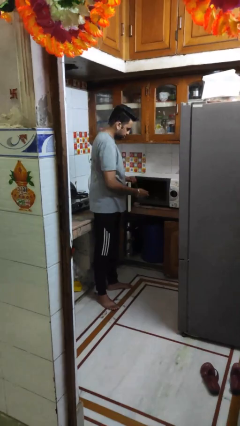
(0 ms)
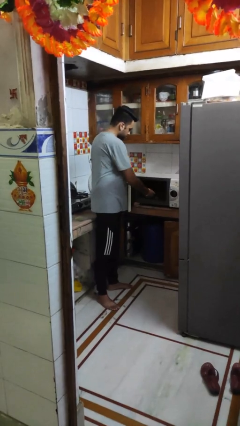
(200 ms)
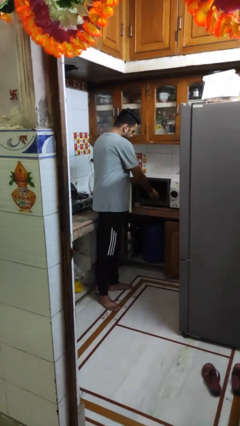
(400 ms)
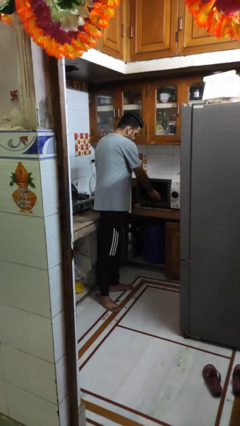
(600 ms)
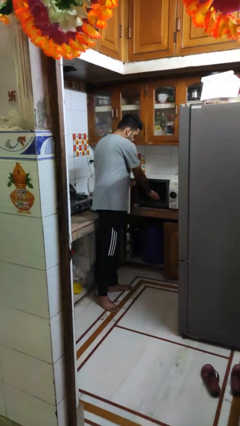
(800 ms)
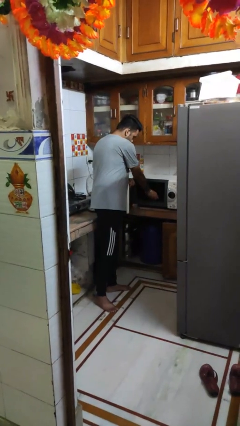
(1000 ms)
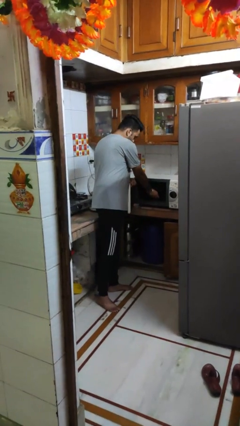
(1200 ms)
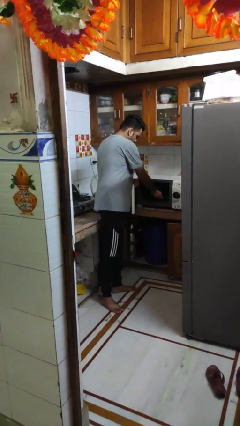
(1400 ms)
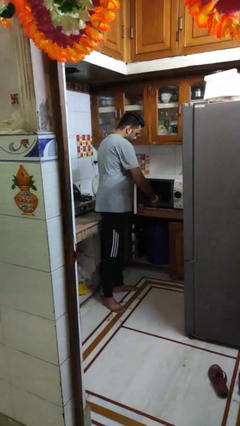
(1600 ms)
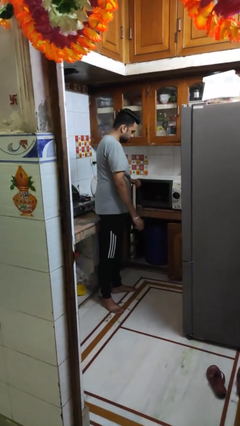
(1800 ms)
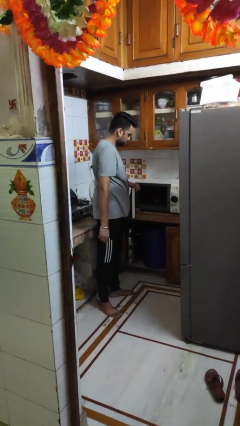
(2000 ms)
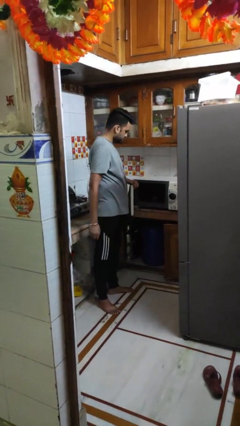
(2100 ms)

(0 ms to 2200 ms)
person puts object into microwave

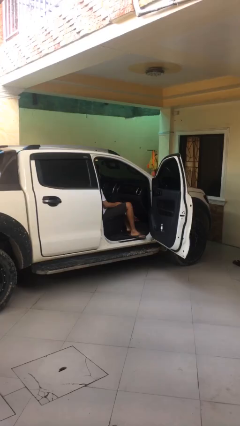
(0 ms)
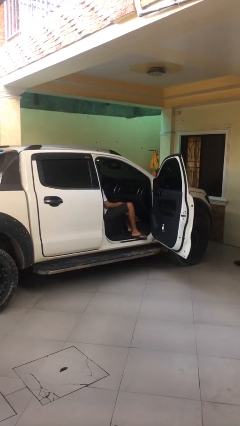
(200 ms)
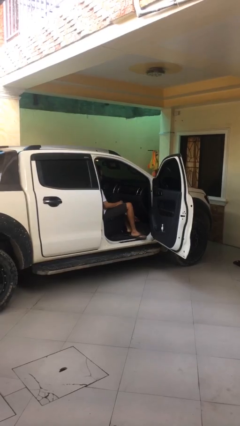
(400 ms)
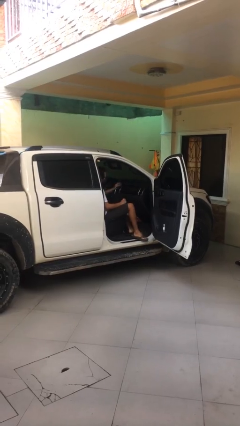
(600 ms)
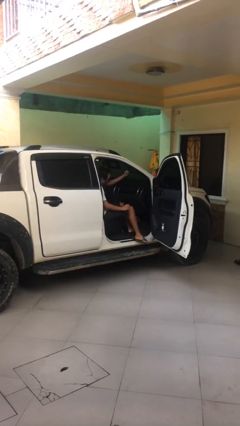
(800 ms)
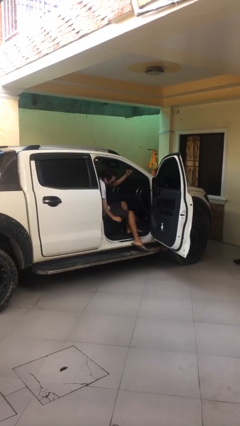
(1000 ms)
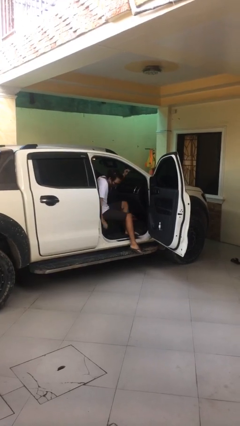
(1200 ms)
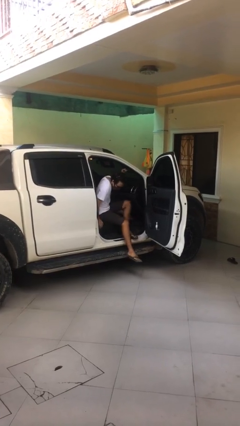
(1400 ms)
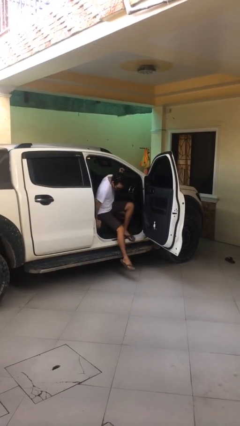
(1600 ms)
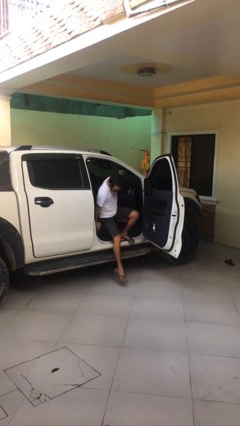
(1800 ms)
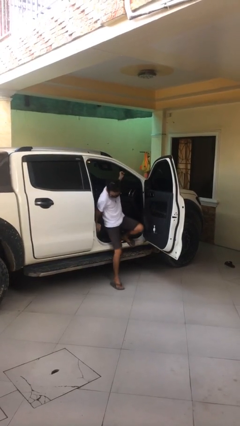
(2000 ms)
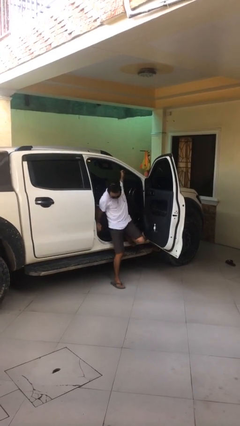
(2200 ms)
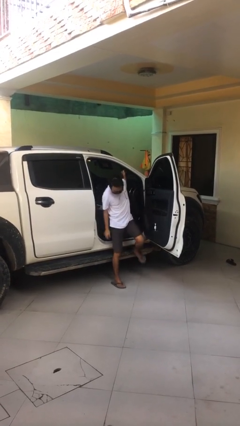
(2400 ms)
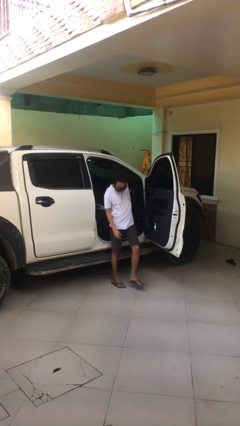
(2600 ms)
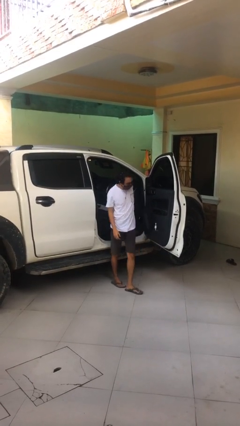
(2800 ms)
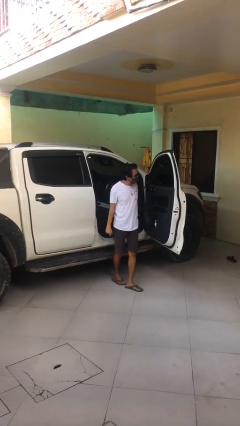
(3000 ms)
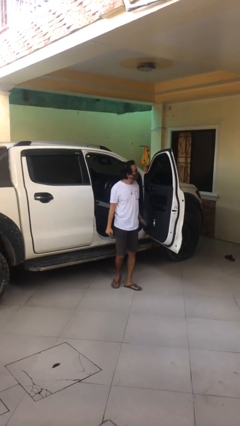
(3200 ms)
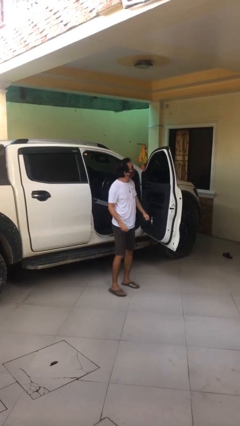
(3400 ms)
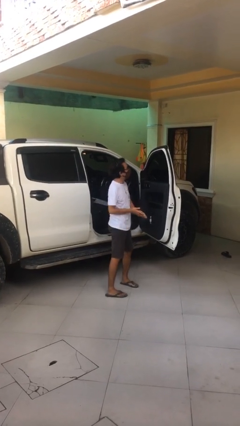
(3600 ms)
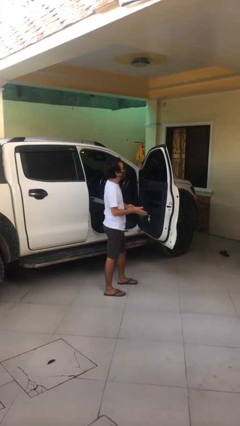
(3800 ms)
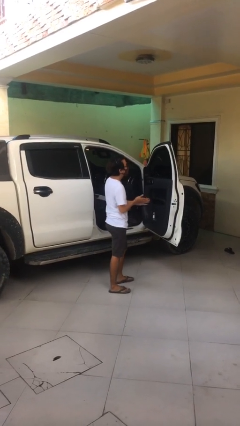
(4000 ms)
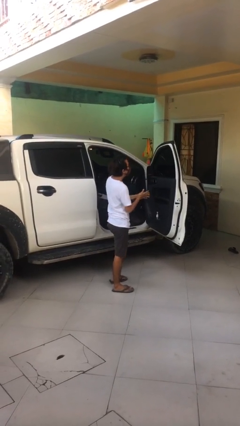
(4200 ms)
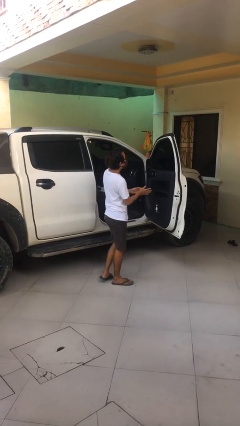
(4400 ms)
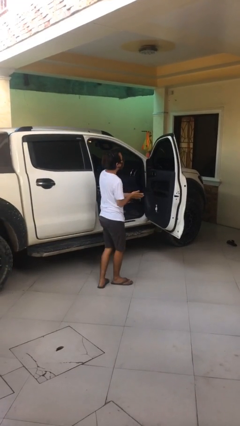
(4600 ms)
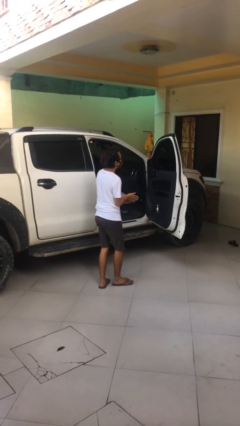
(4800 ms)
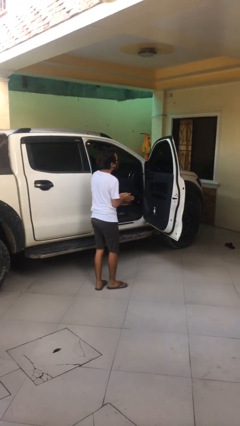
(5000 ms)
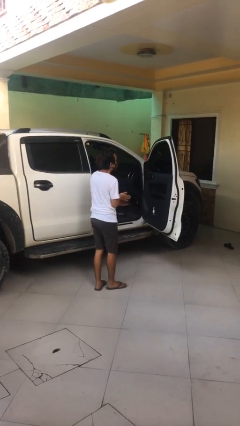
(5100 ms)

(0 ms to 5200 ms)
person exits car

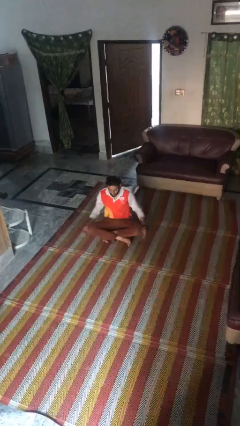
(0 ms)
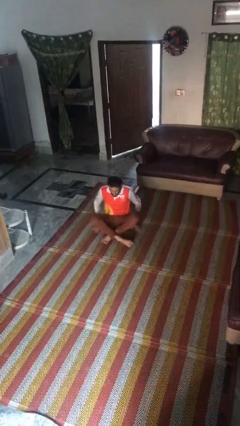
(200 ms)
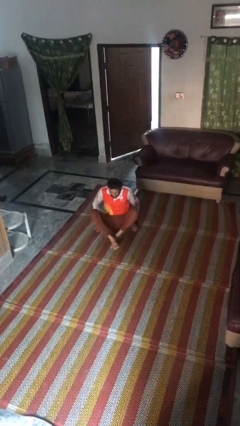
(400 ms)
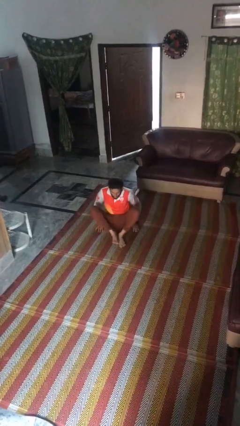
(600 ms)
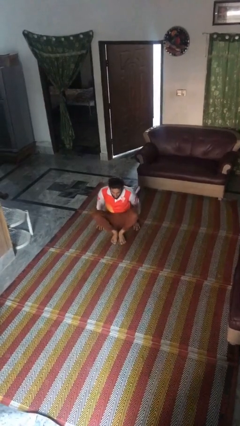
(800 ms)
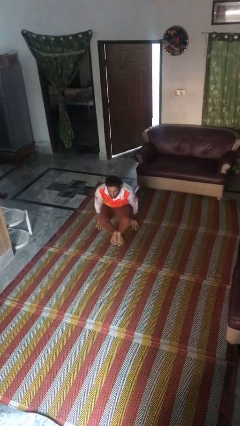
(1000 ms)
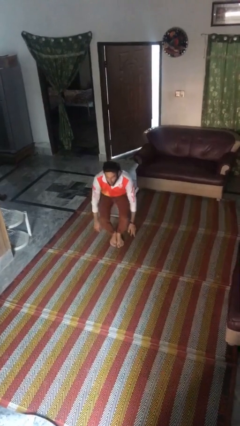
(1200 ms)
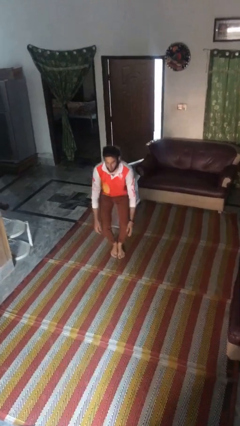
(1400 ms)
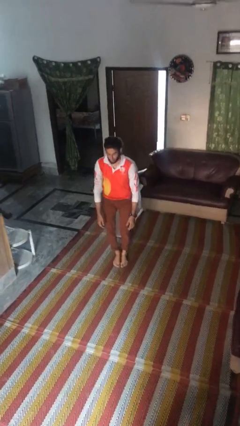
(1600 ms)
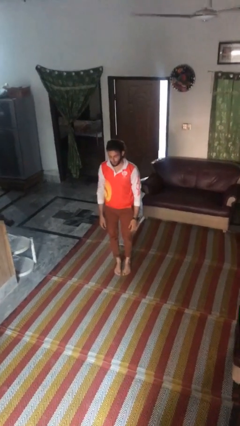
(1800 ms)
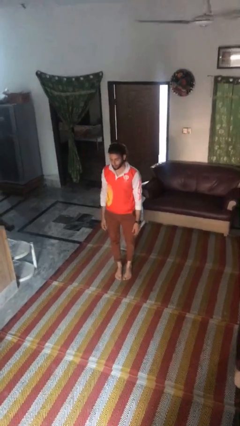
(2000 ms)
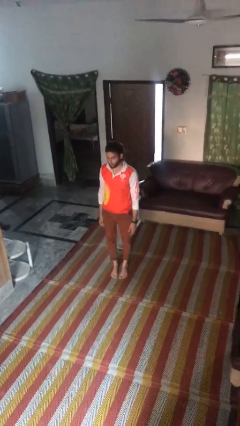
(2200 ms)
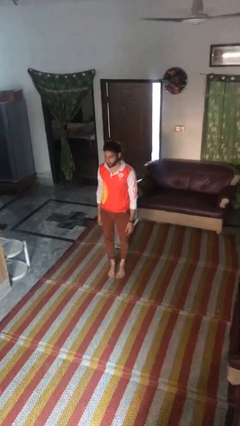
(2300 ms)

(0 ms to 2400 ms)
person stands up from floor

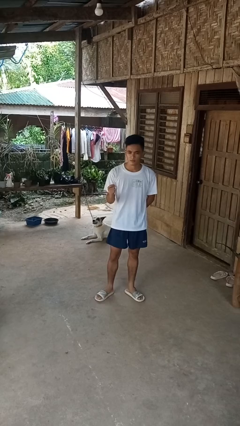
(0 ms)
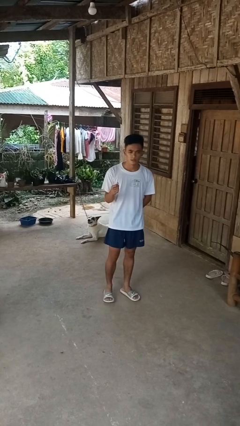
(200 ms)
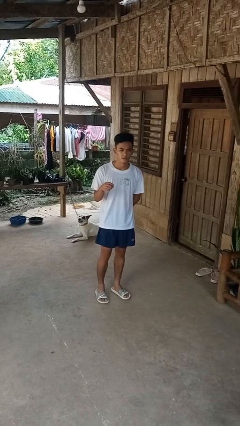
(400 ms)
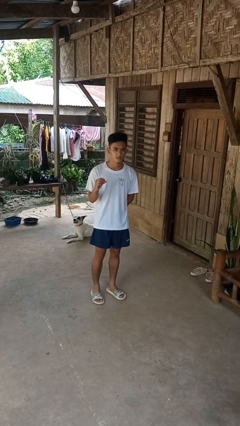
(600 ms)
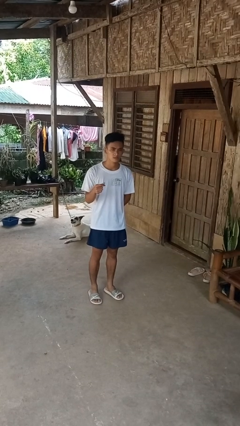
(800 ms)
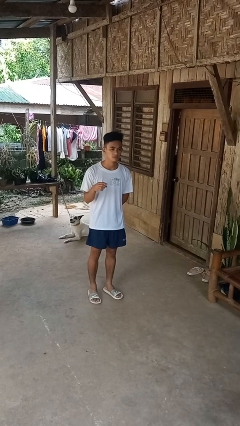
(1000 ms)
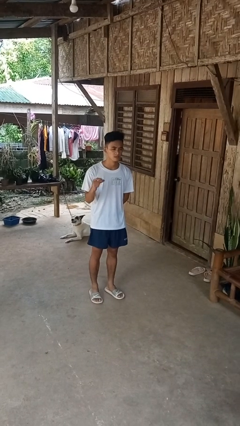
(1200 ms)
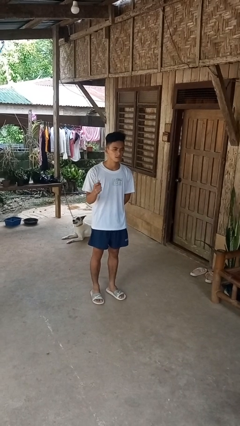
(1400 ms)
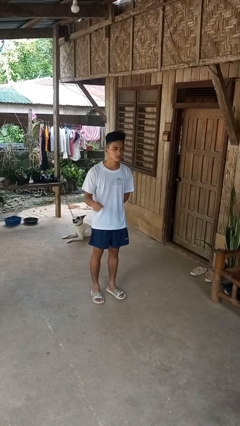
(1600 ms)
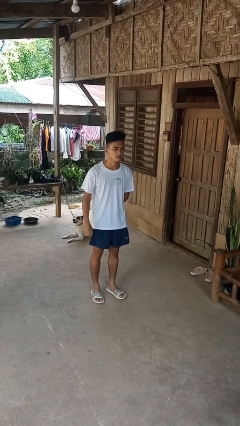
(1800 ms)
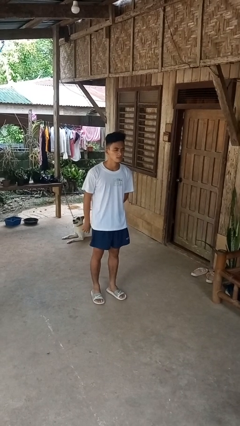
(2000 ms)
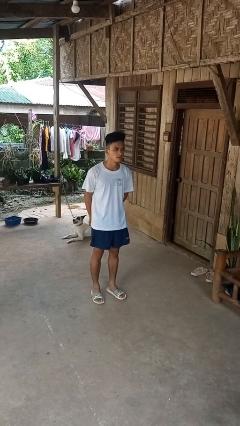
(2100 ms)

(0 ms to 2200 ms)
person snaps fingers

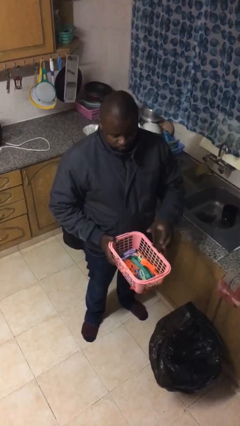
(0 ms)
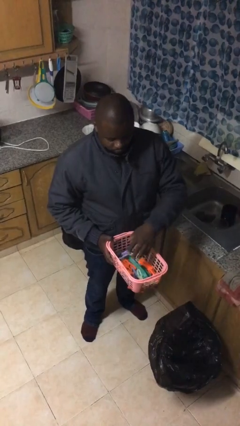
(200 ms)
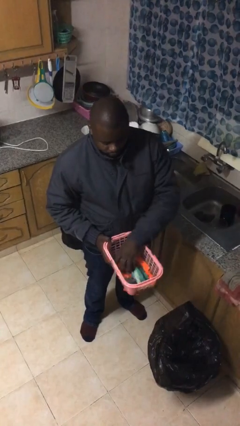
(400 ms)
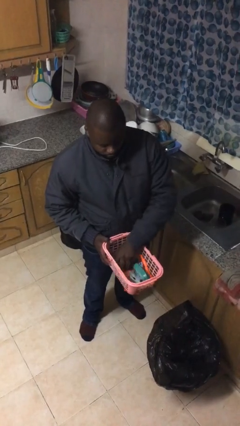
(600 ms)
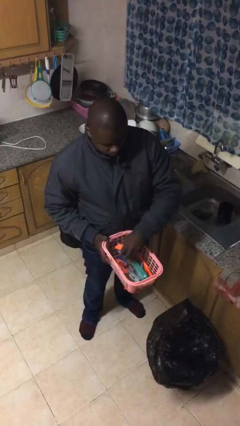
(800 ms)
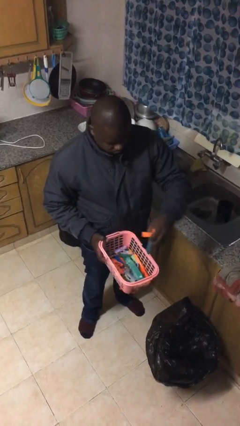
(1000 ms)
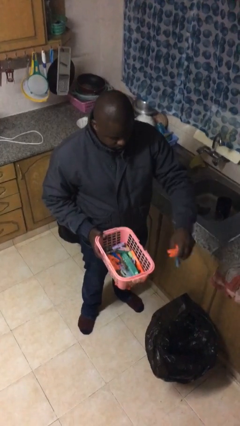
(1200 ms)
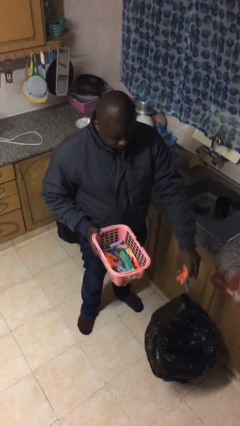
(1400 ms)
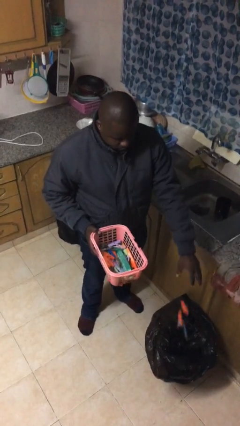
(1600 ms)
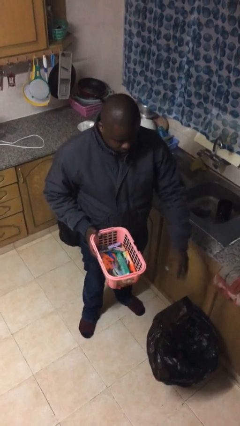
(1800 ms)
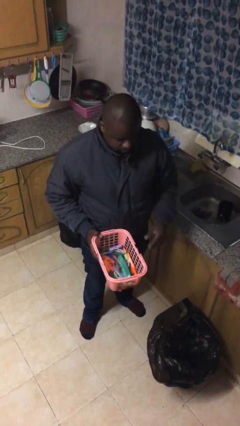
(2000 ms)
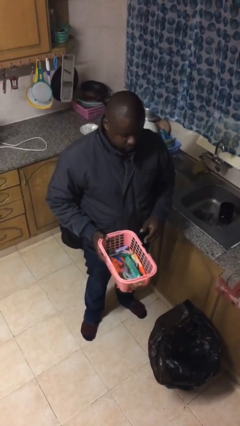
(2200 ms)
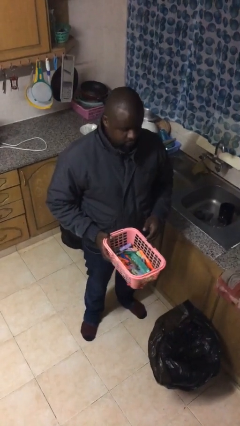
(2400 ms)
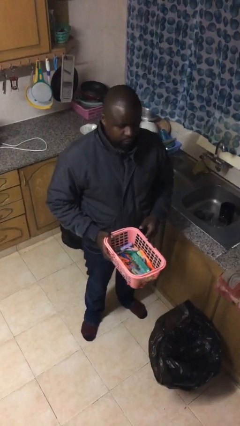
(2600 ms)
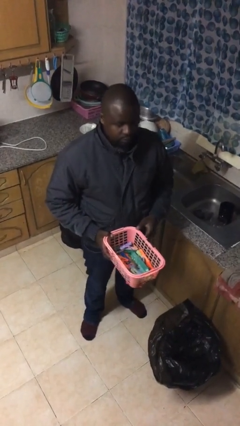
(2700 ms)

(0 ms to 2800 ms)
person discards trash

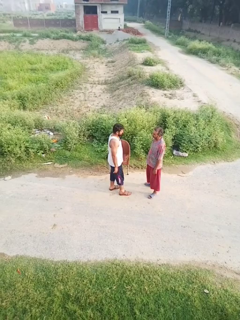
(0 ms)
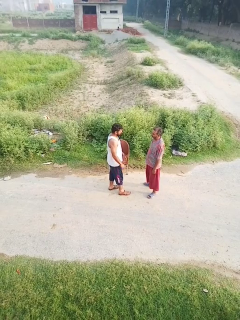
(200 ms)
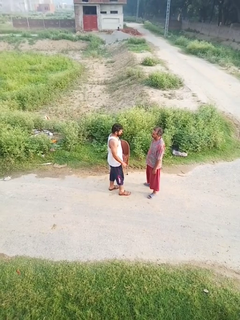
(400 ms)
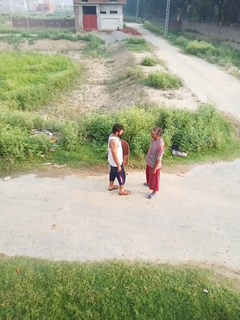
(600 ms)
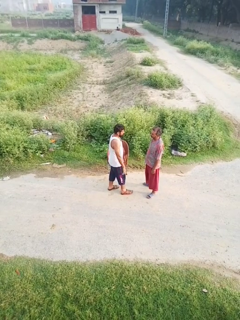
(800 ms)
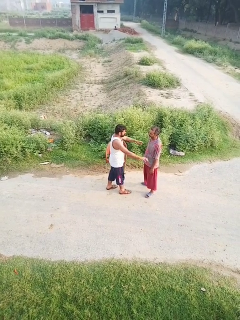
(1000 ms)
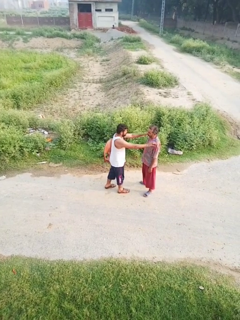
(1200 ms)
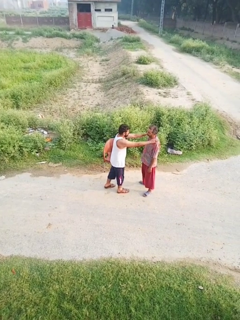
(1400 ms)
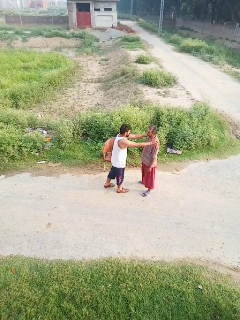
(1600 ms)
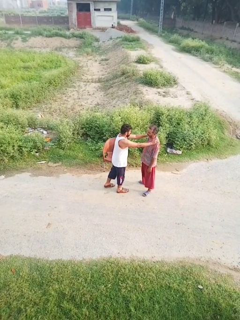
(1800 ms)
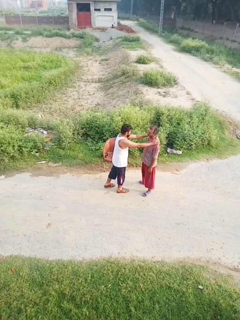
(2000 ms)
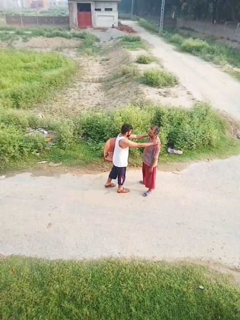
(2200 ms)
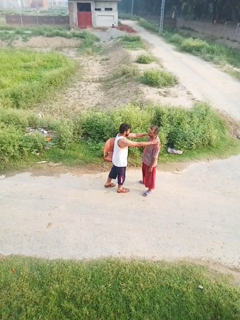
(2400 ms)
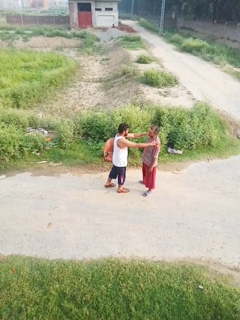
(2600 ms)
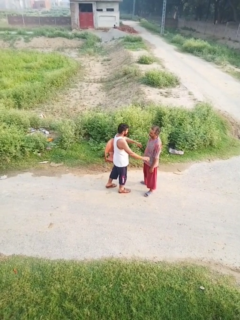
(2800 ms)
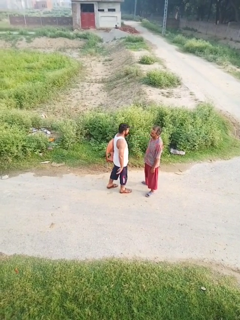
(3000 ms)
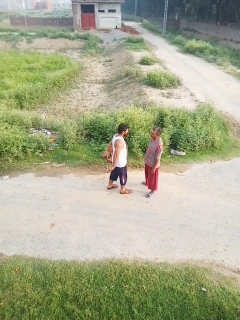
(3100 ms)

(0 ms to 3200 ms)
person pounds shoulders of person
